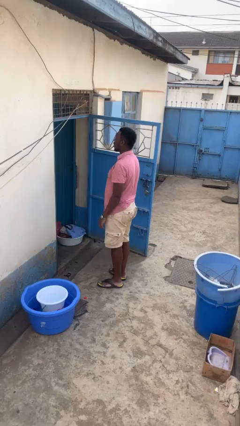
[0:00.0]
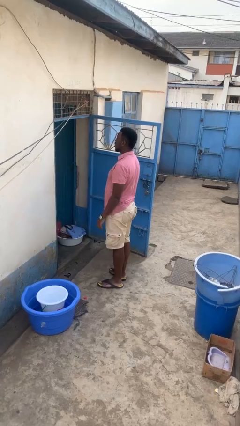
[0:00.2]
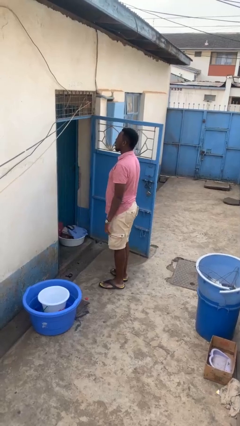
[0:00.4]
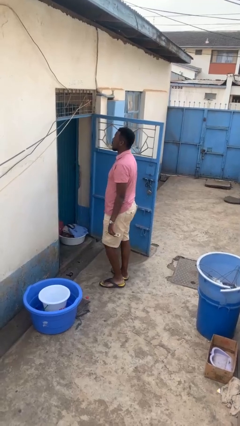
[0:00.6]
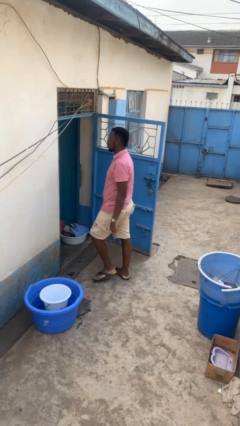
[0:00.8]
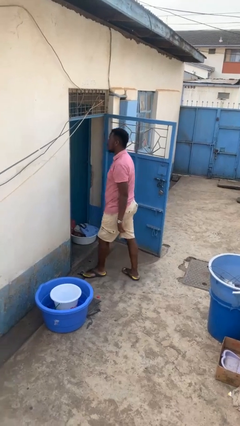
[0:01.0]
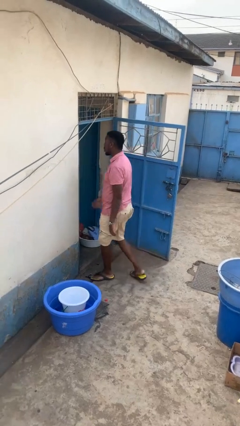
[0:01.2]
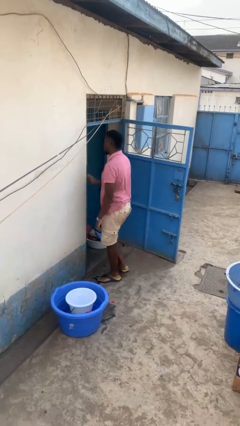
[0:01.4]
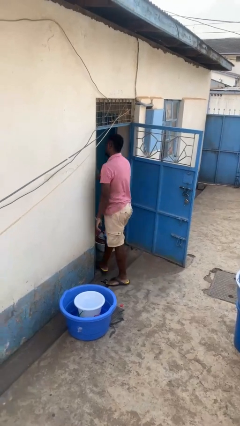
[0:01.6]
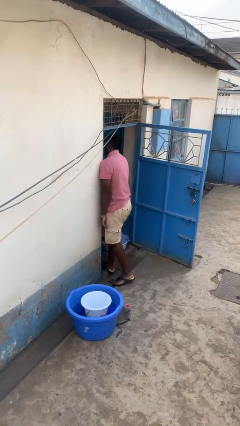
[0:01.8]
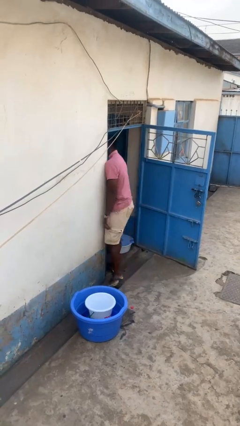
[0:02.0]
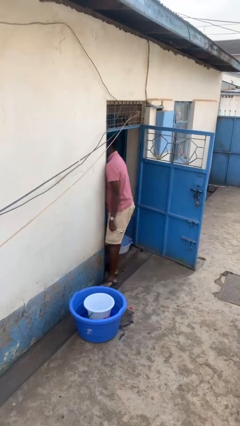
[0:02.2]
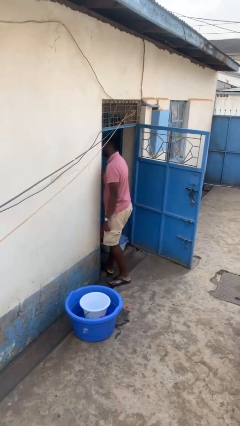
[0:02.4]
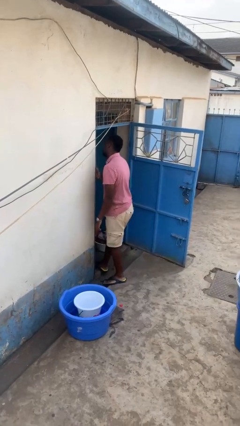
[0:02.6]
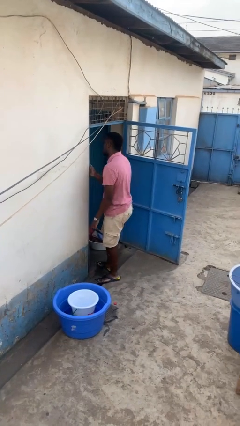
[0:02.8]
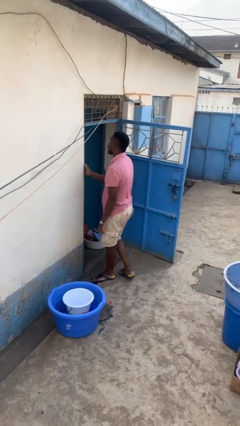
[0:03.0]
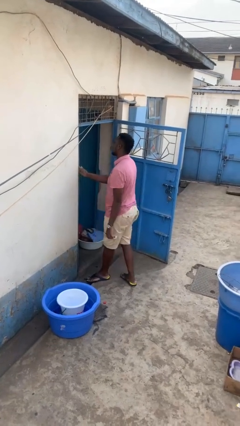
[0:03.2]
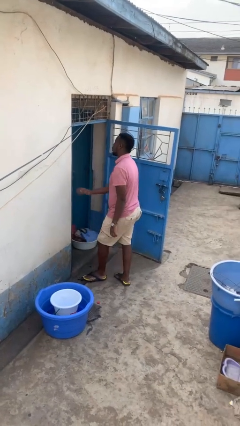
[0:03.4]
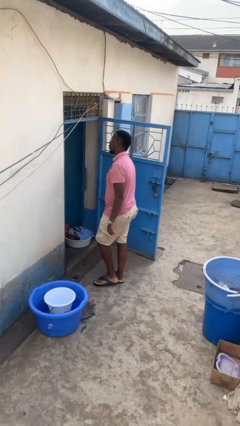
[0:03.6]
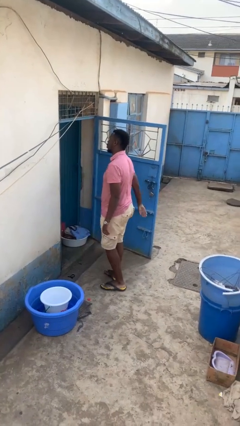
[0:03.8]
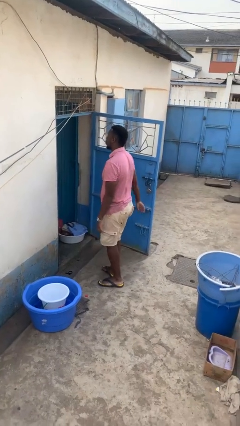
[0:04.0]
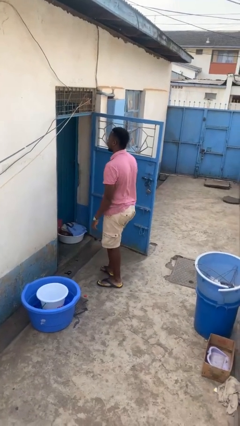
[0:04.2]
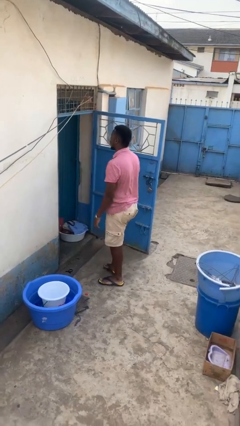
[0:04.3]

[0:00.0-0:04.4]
person bumps into wall

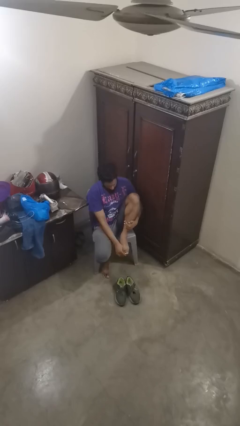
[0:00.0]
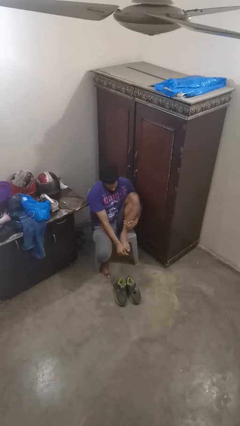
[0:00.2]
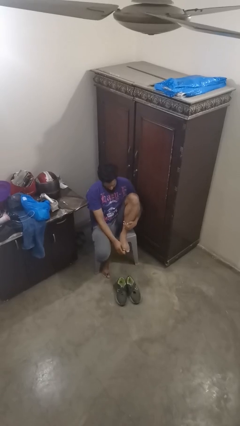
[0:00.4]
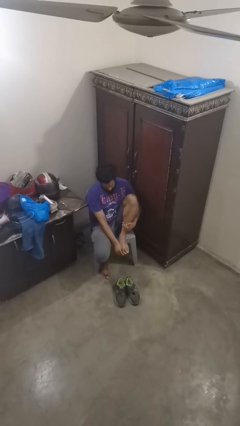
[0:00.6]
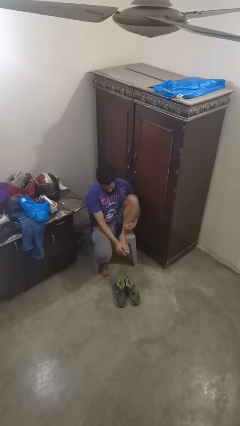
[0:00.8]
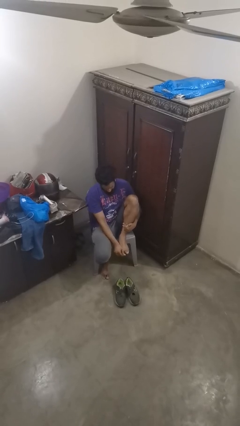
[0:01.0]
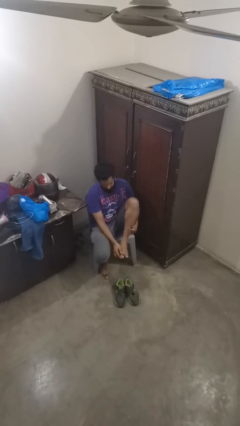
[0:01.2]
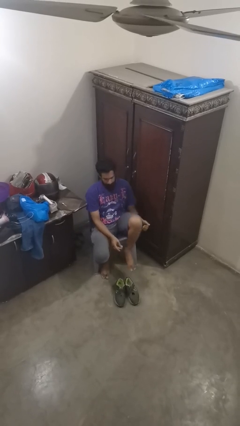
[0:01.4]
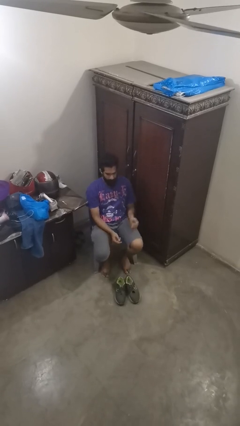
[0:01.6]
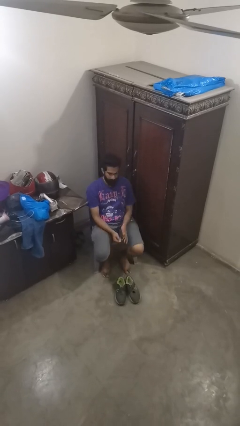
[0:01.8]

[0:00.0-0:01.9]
person rubs foot

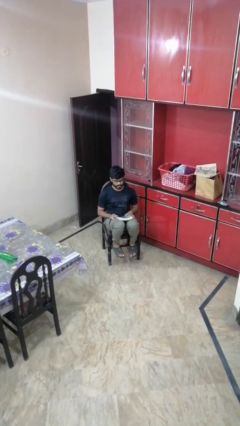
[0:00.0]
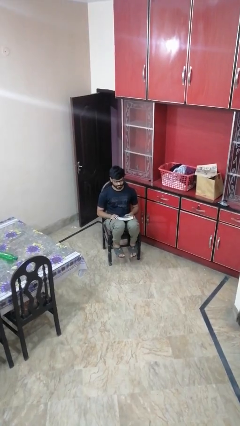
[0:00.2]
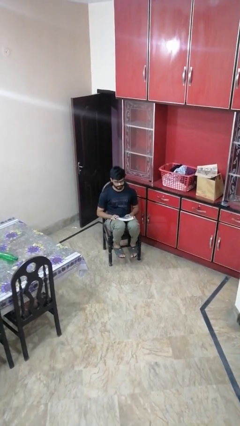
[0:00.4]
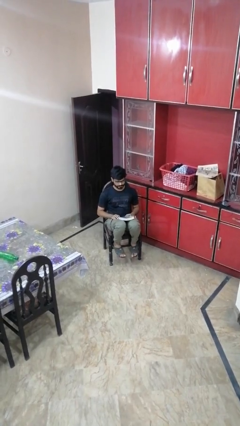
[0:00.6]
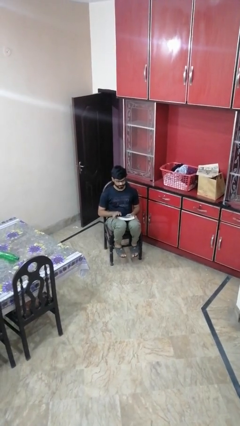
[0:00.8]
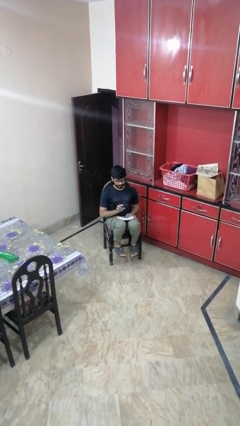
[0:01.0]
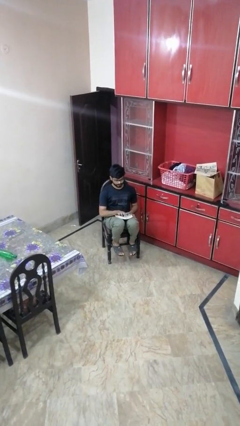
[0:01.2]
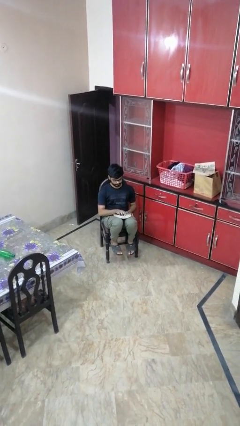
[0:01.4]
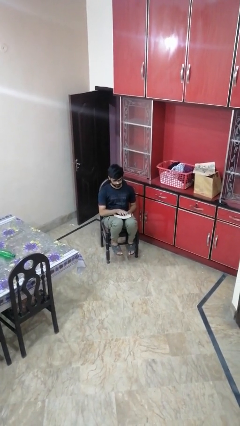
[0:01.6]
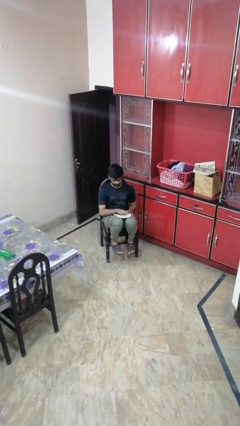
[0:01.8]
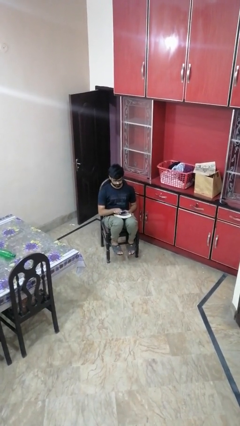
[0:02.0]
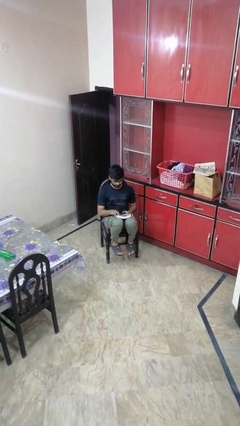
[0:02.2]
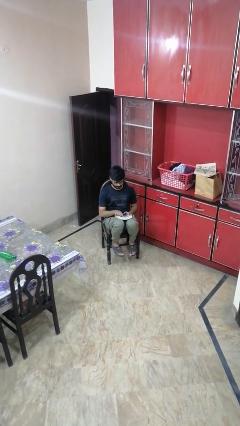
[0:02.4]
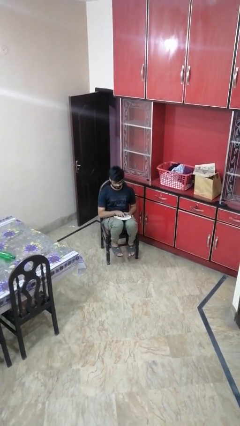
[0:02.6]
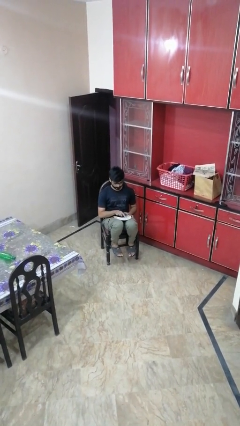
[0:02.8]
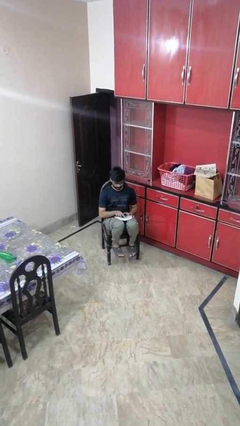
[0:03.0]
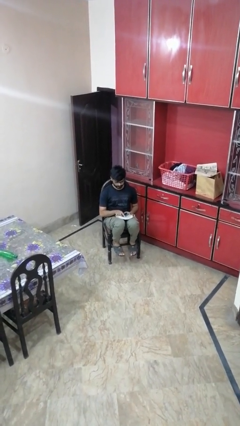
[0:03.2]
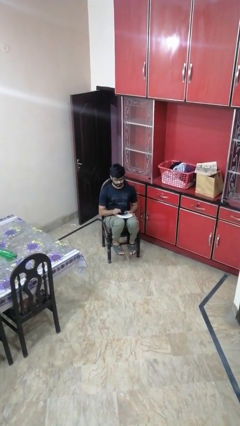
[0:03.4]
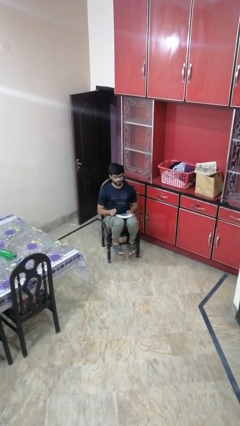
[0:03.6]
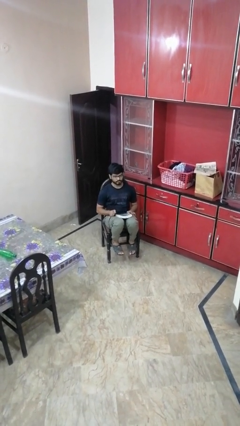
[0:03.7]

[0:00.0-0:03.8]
person taps object with finger

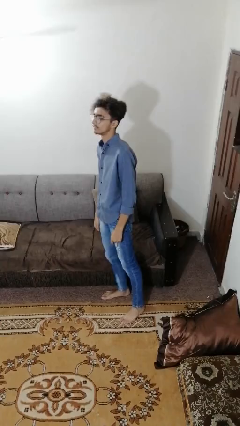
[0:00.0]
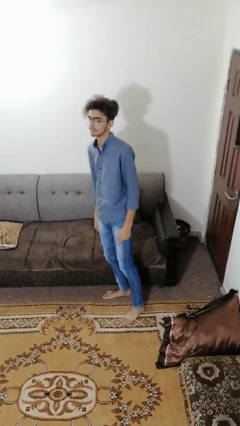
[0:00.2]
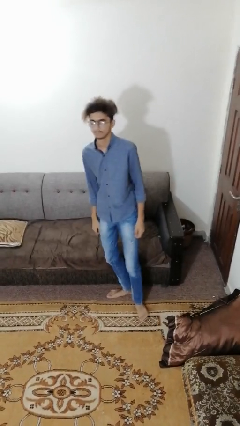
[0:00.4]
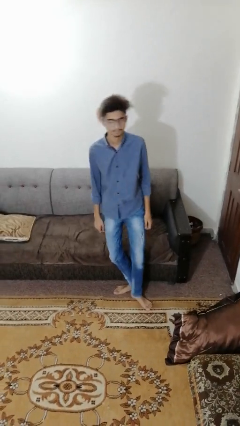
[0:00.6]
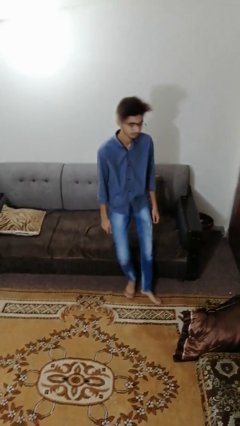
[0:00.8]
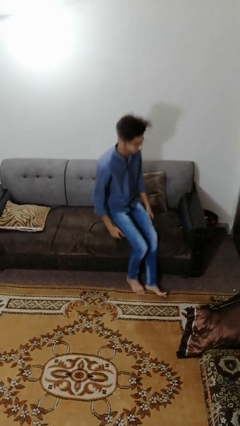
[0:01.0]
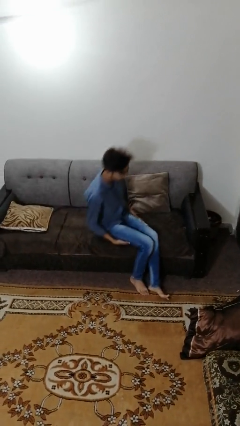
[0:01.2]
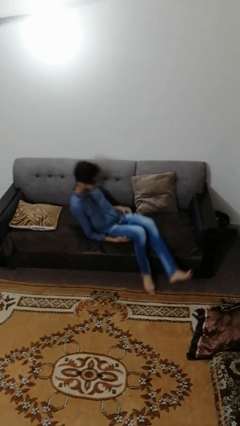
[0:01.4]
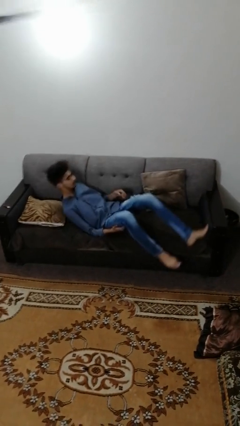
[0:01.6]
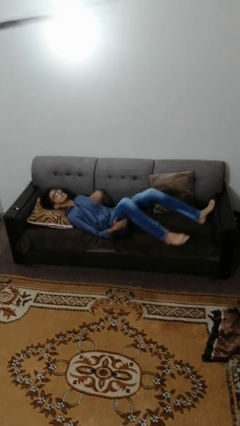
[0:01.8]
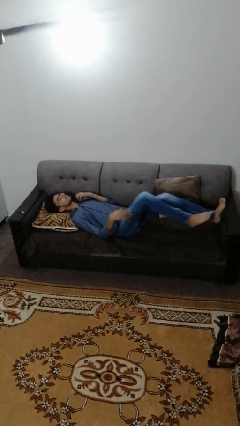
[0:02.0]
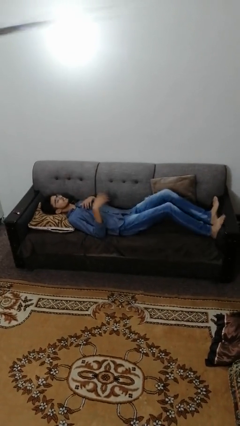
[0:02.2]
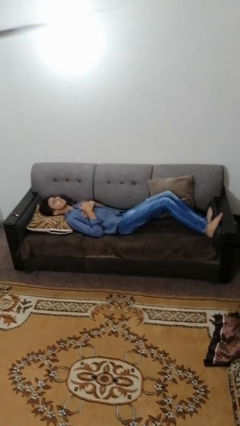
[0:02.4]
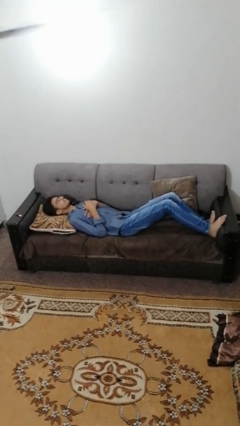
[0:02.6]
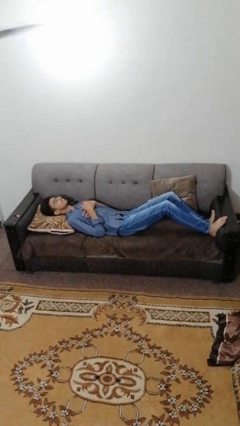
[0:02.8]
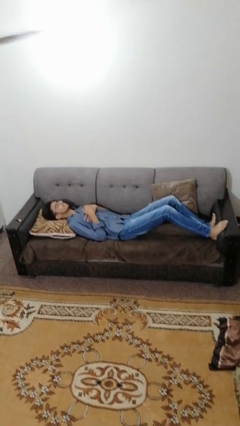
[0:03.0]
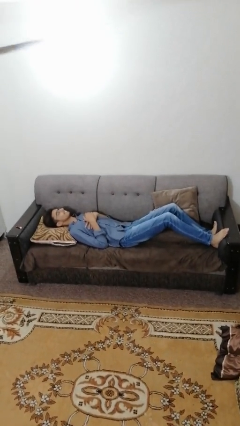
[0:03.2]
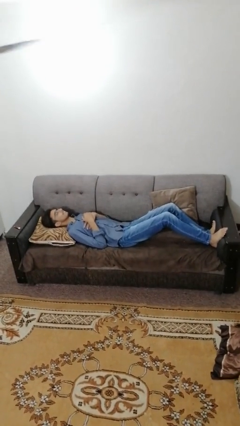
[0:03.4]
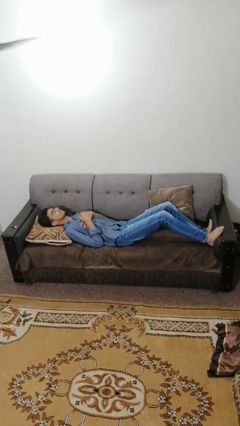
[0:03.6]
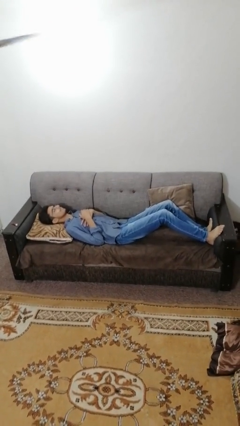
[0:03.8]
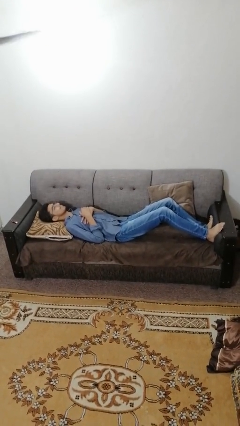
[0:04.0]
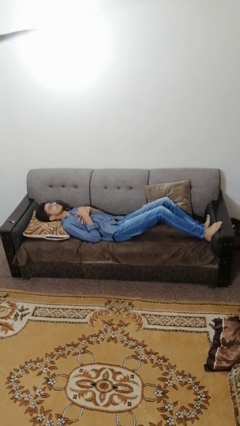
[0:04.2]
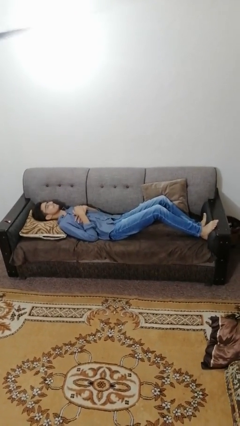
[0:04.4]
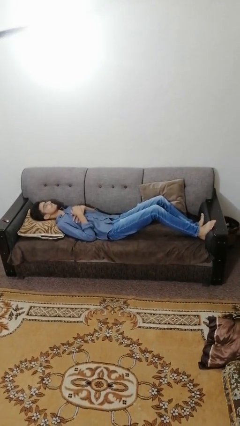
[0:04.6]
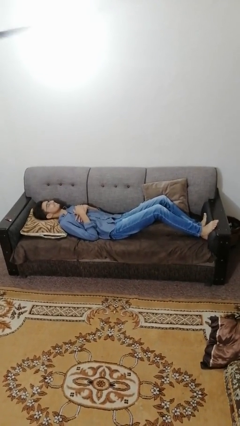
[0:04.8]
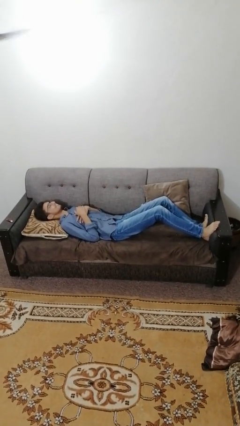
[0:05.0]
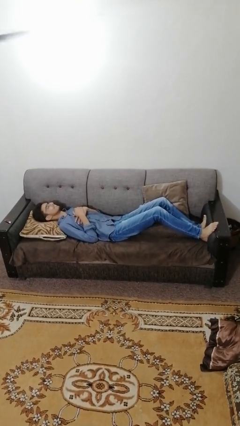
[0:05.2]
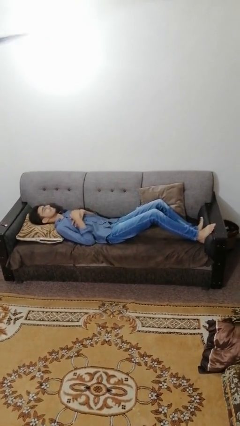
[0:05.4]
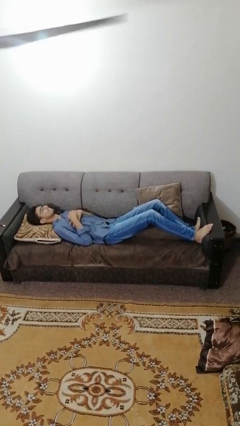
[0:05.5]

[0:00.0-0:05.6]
person lies down on couch

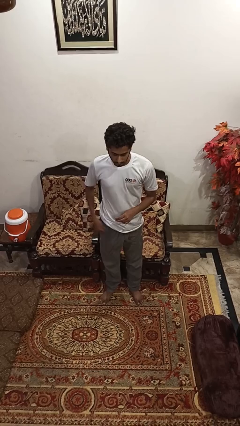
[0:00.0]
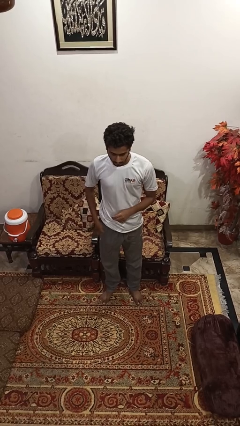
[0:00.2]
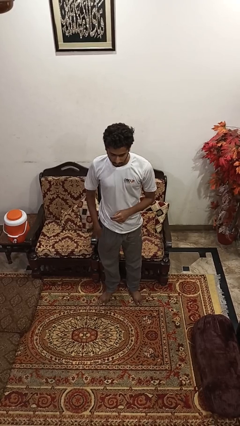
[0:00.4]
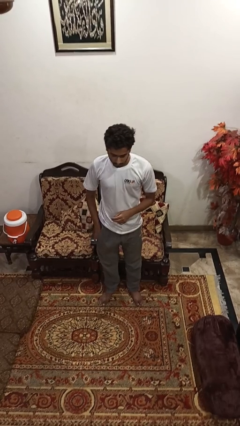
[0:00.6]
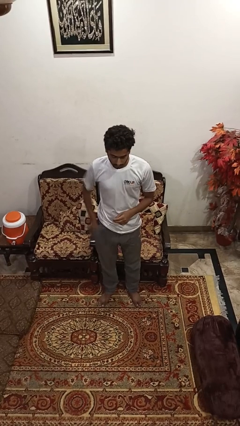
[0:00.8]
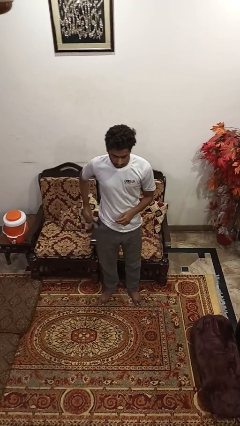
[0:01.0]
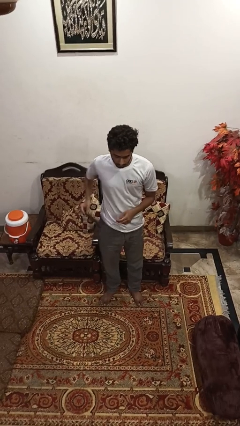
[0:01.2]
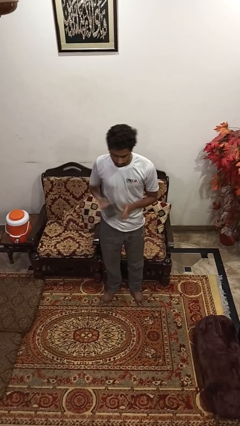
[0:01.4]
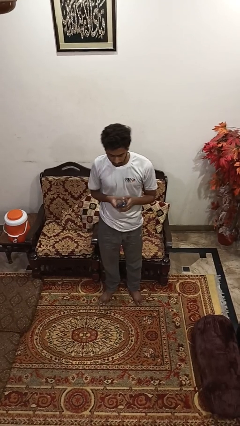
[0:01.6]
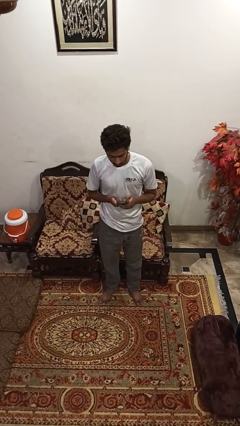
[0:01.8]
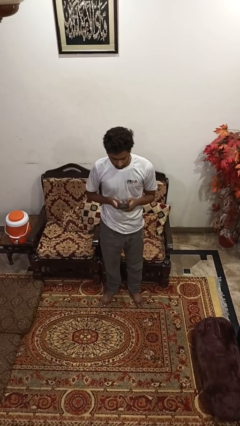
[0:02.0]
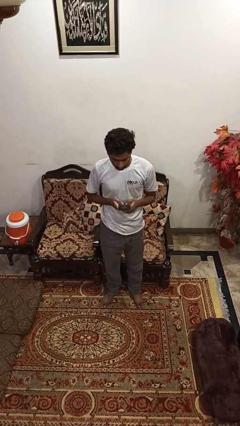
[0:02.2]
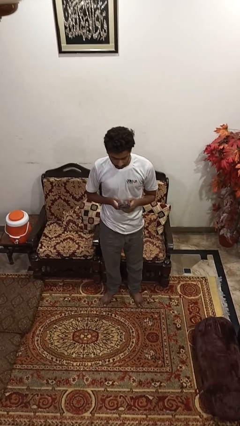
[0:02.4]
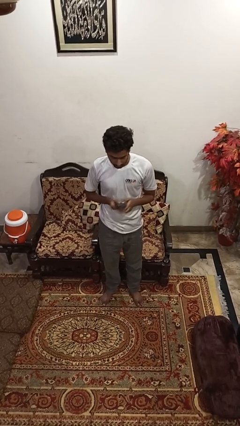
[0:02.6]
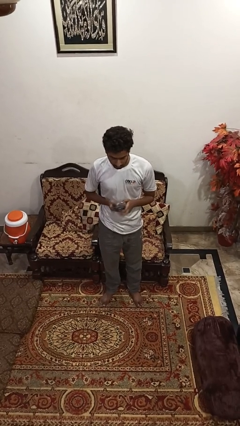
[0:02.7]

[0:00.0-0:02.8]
person takes phone from pocket
